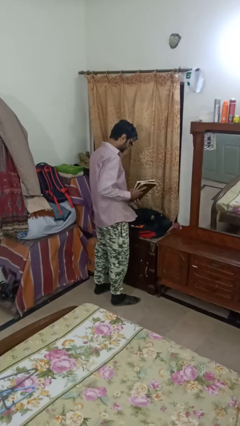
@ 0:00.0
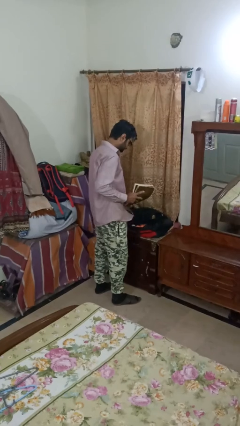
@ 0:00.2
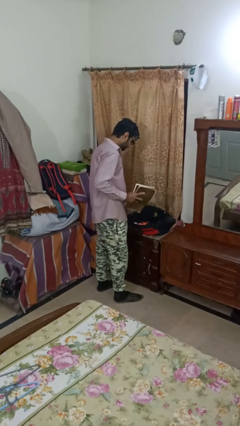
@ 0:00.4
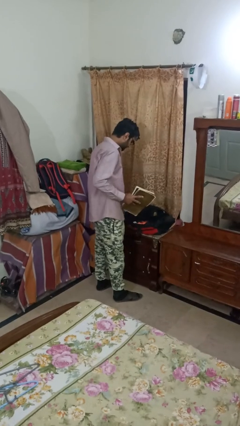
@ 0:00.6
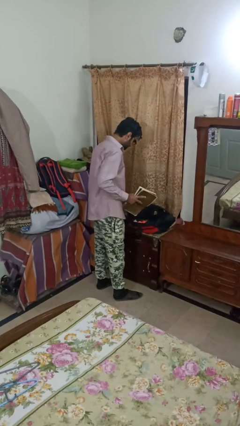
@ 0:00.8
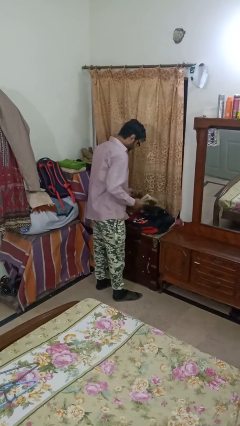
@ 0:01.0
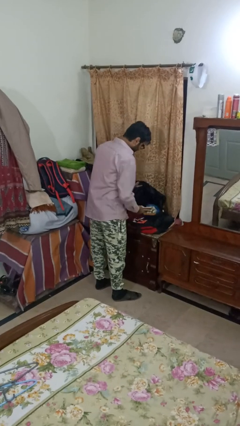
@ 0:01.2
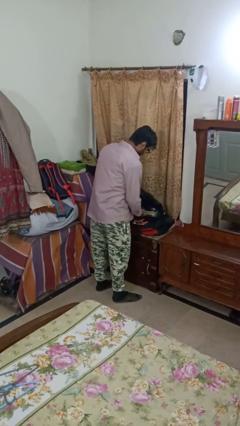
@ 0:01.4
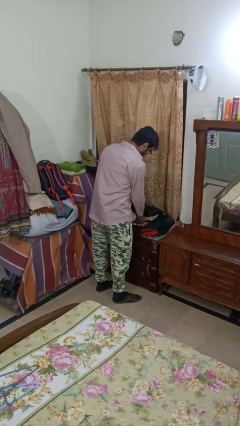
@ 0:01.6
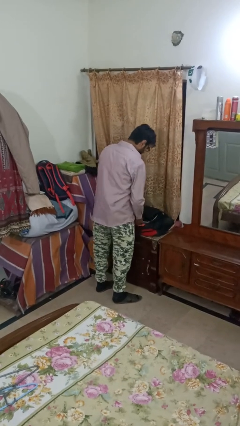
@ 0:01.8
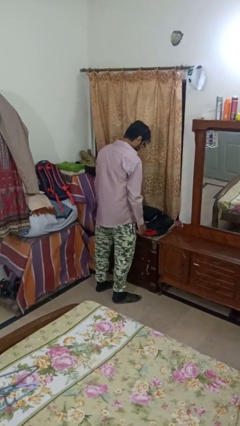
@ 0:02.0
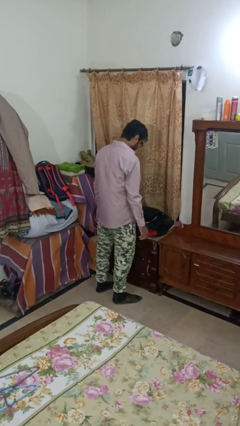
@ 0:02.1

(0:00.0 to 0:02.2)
person puts object into bag

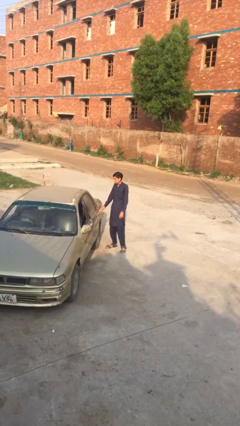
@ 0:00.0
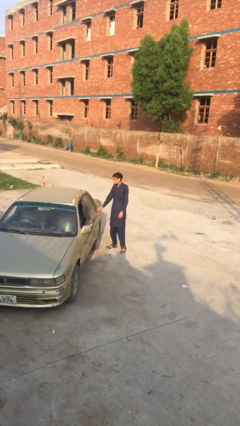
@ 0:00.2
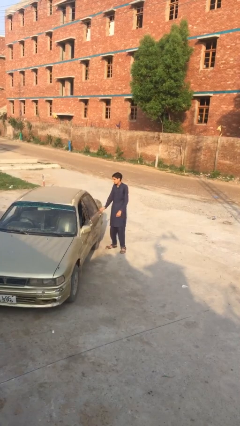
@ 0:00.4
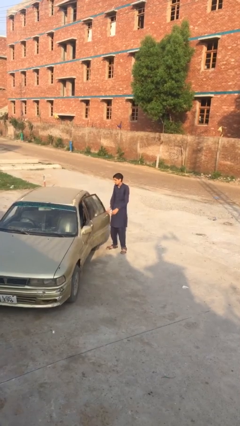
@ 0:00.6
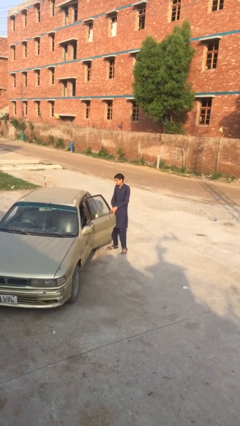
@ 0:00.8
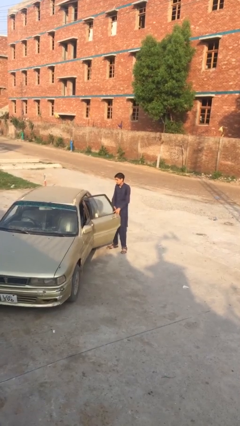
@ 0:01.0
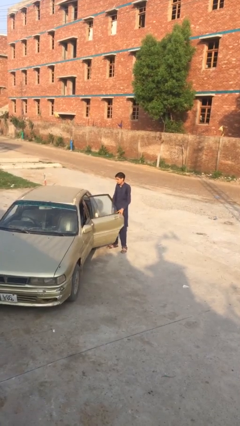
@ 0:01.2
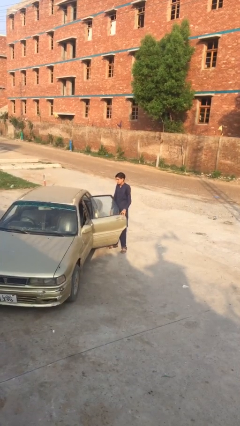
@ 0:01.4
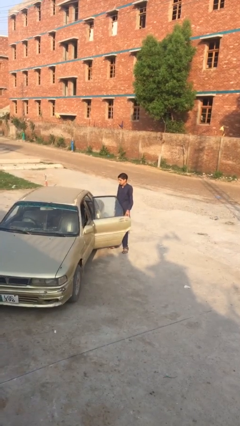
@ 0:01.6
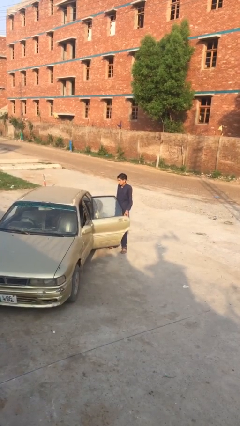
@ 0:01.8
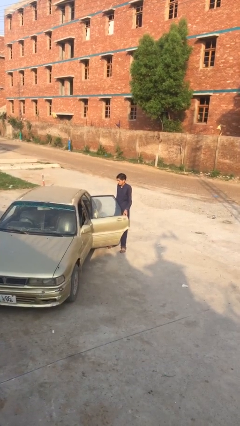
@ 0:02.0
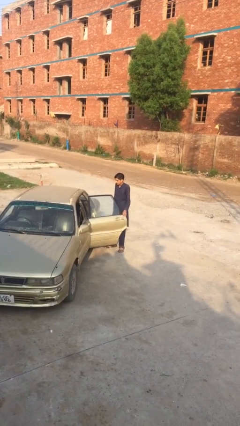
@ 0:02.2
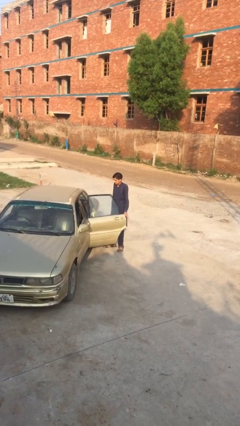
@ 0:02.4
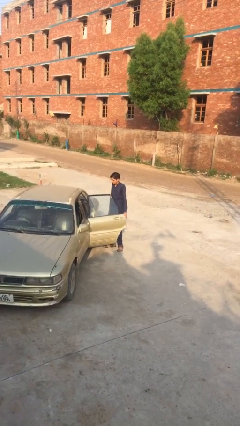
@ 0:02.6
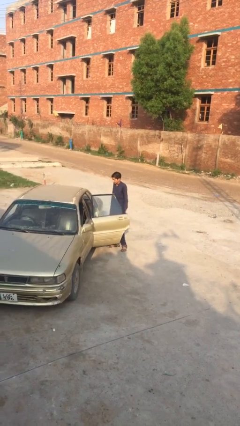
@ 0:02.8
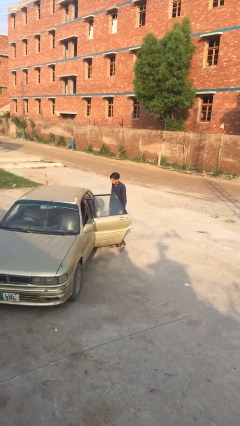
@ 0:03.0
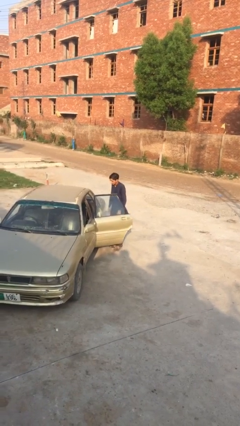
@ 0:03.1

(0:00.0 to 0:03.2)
person opens car door

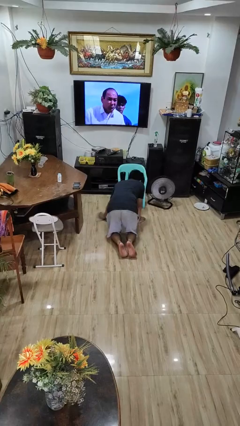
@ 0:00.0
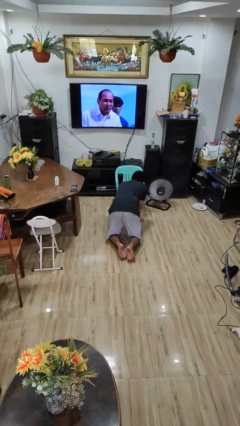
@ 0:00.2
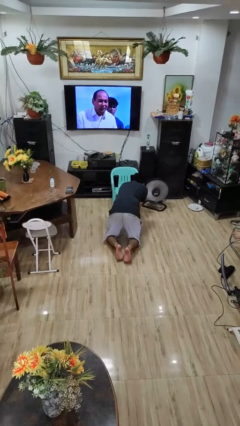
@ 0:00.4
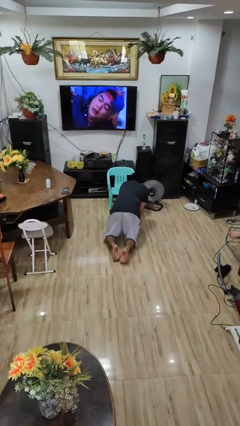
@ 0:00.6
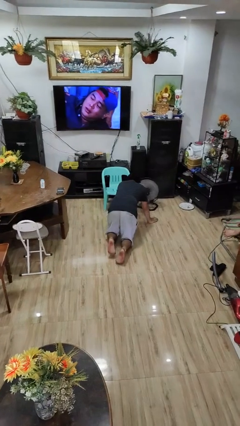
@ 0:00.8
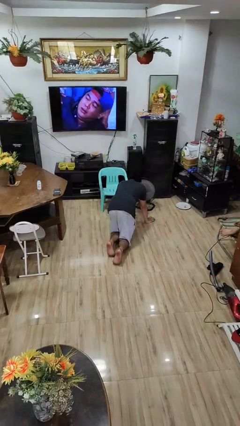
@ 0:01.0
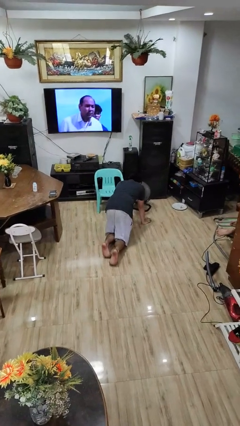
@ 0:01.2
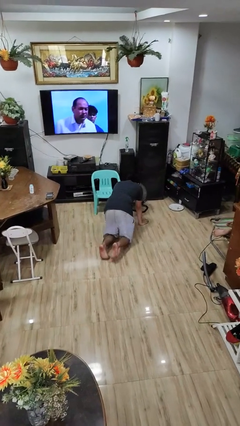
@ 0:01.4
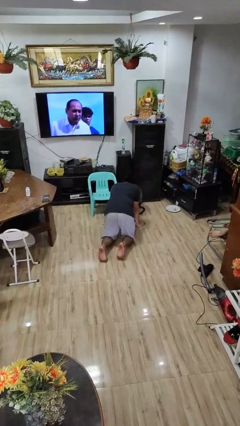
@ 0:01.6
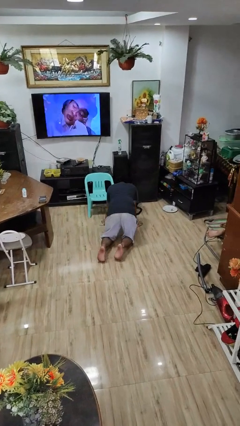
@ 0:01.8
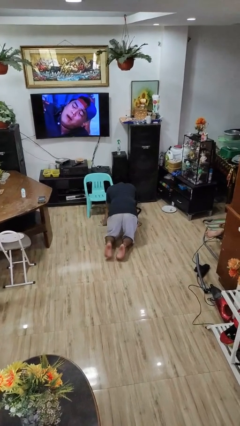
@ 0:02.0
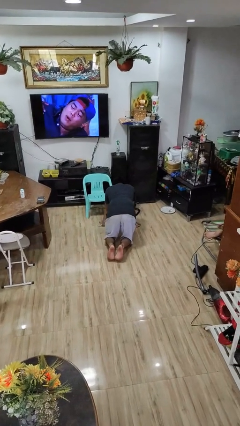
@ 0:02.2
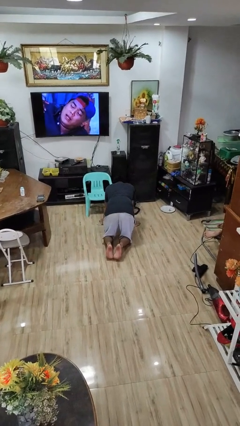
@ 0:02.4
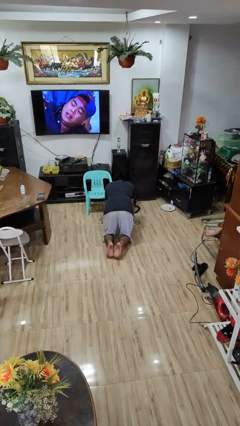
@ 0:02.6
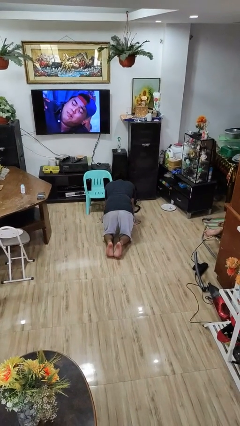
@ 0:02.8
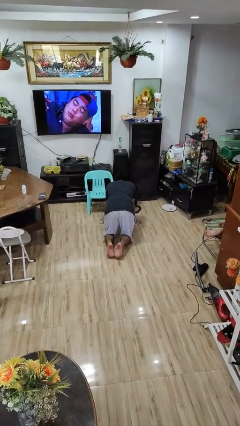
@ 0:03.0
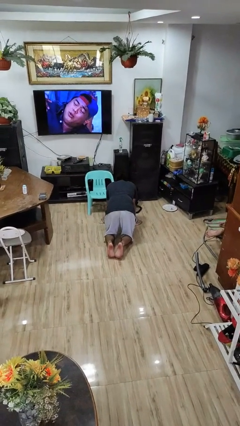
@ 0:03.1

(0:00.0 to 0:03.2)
person crawls

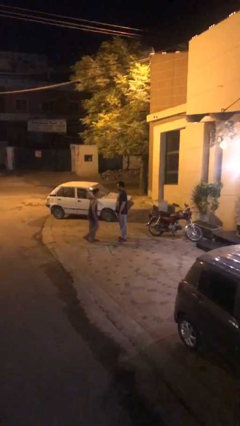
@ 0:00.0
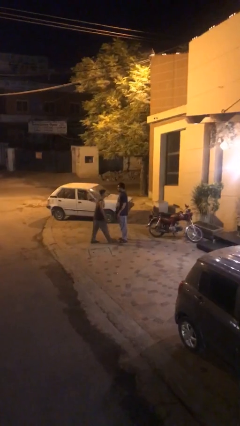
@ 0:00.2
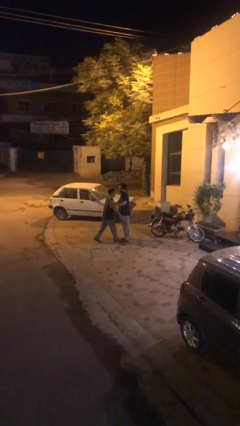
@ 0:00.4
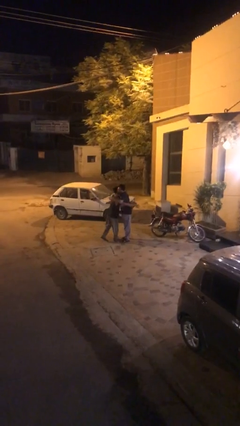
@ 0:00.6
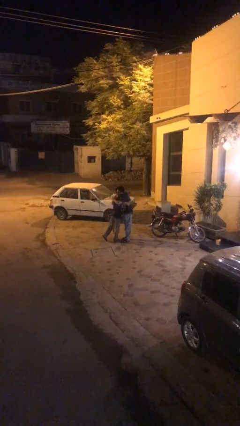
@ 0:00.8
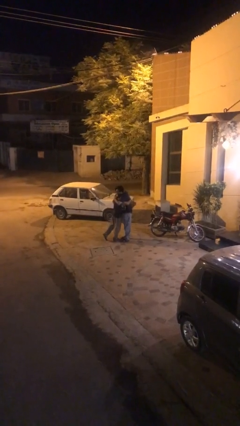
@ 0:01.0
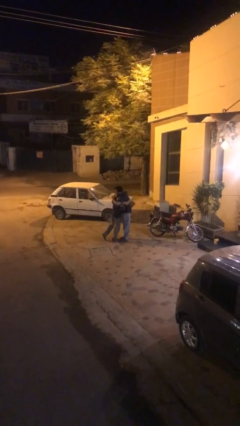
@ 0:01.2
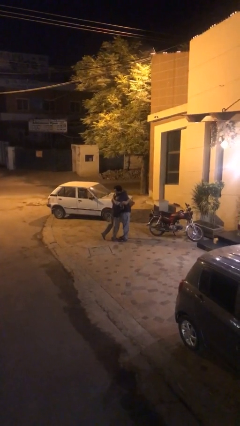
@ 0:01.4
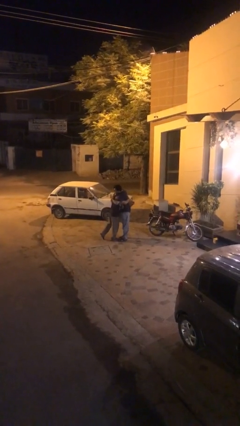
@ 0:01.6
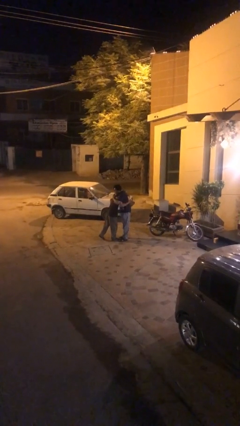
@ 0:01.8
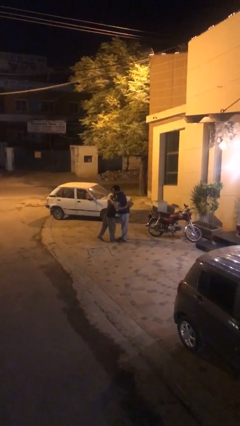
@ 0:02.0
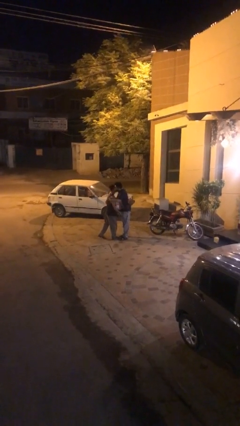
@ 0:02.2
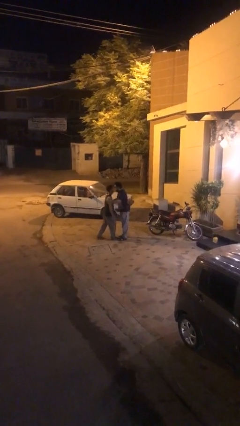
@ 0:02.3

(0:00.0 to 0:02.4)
person embraces person

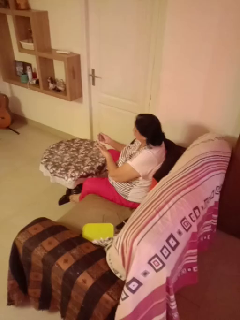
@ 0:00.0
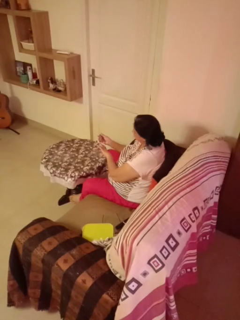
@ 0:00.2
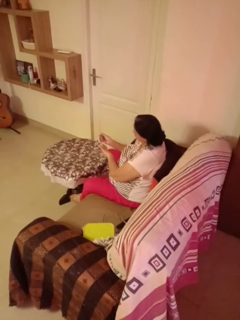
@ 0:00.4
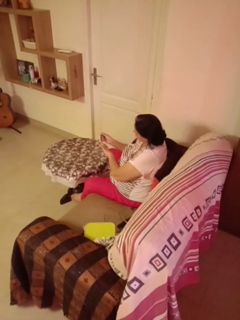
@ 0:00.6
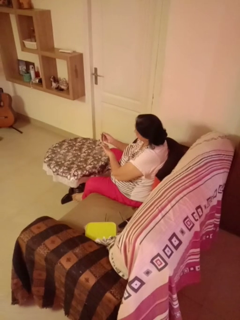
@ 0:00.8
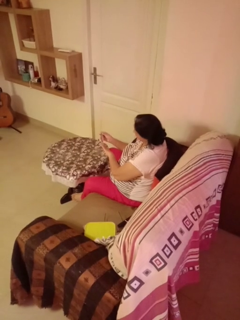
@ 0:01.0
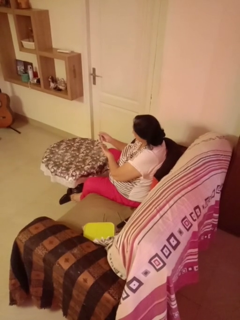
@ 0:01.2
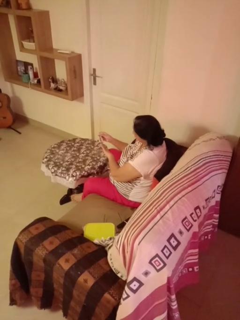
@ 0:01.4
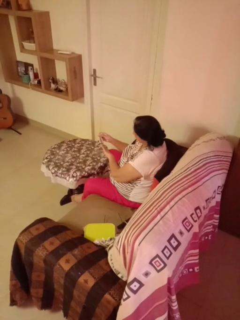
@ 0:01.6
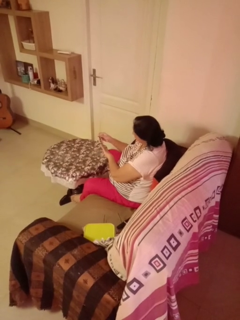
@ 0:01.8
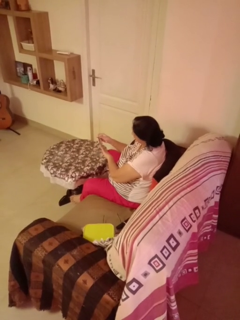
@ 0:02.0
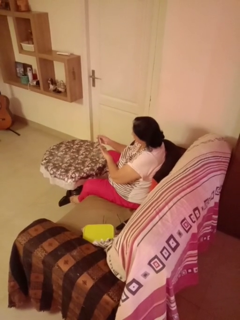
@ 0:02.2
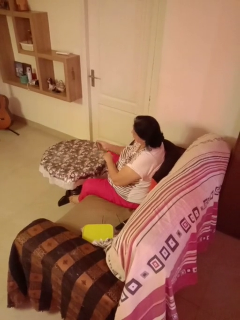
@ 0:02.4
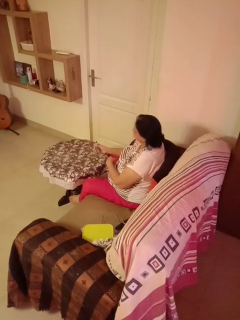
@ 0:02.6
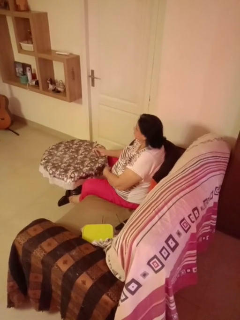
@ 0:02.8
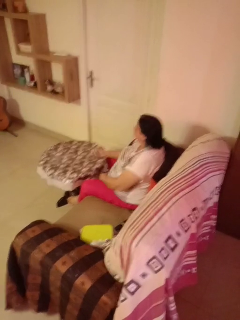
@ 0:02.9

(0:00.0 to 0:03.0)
person clips fingernails

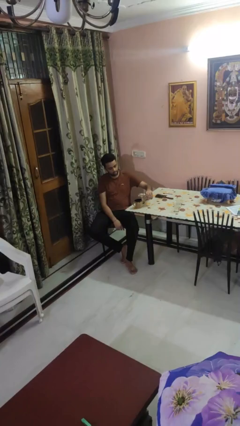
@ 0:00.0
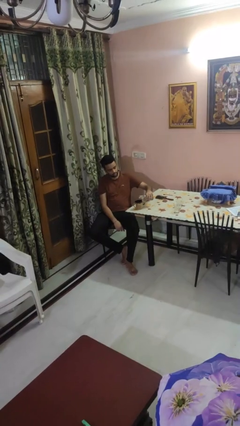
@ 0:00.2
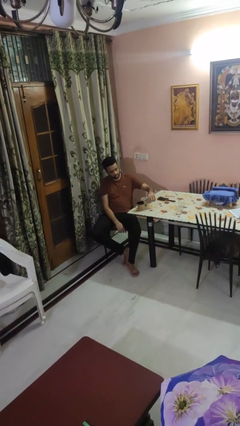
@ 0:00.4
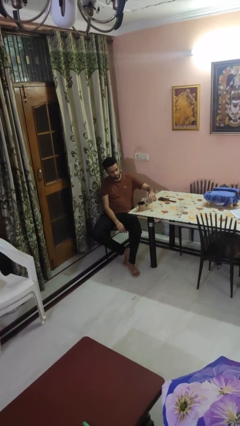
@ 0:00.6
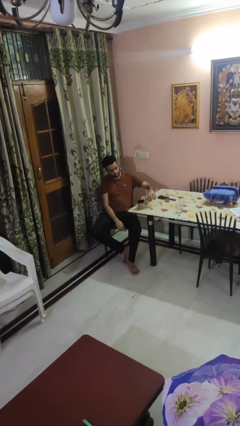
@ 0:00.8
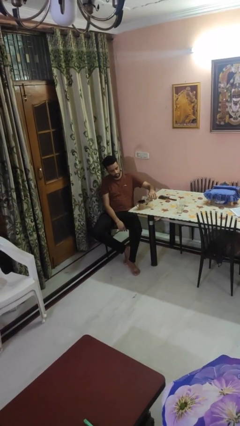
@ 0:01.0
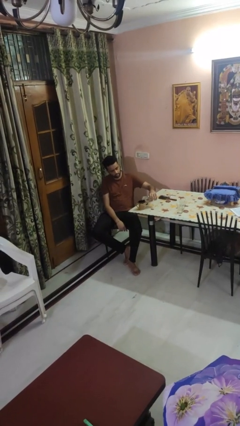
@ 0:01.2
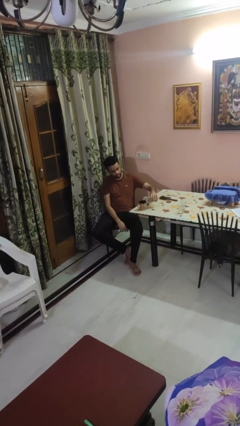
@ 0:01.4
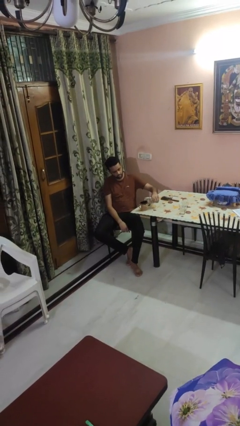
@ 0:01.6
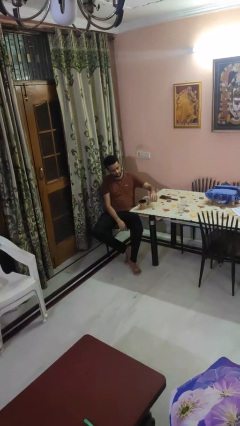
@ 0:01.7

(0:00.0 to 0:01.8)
person pours liquid into cup

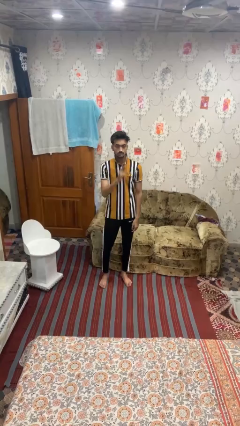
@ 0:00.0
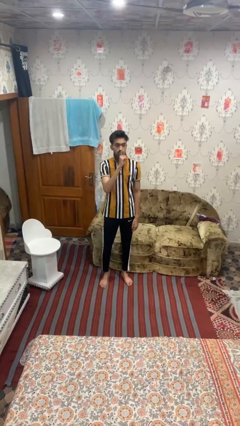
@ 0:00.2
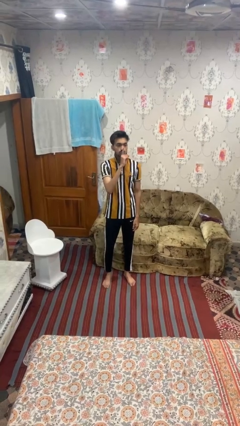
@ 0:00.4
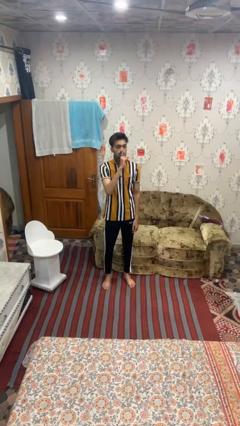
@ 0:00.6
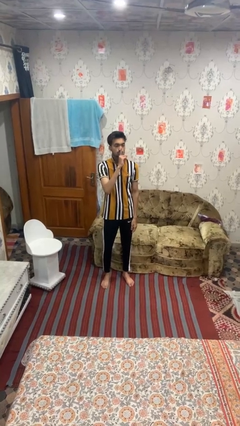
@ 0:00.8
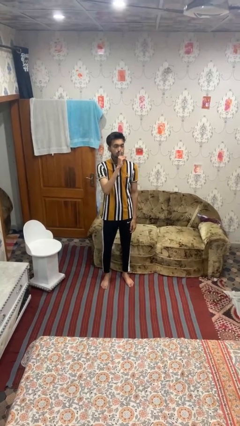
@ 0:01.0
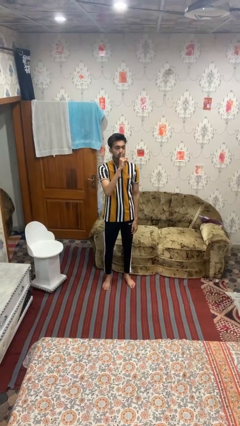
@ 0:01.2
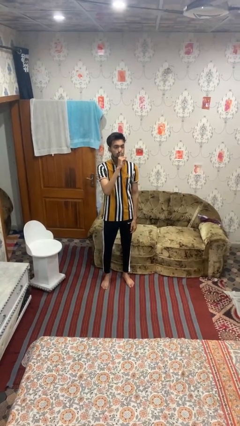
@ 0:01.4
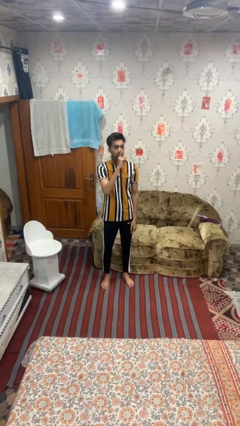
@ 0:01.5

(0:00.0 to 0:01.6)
person gestures be quiet
